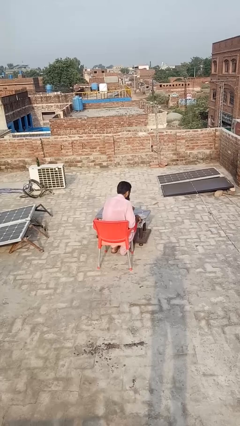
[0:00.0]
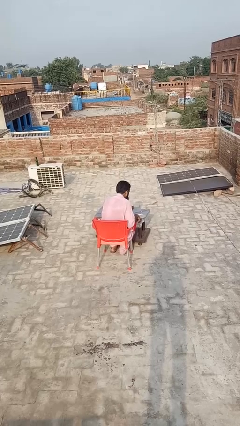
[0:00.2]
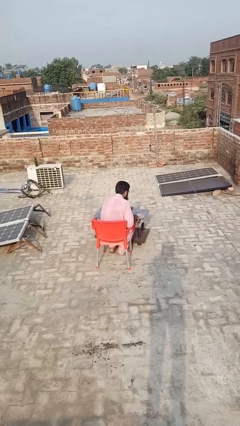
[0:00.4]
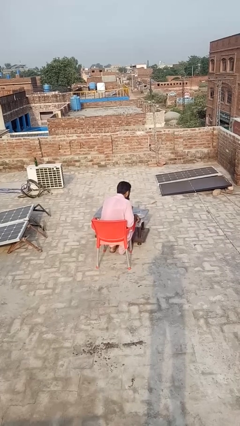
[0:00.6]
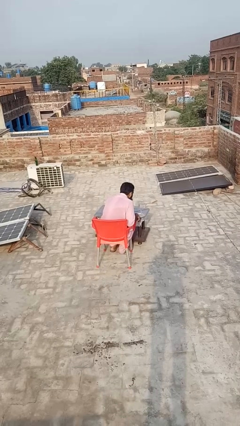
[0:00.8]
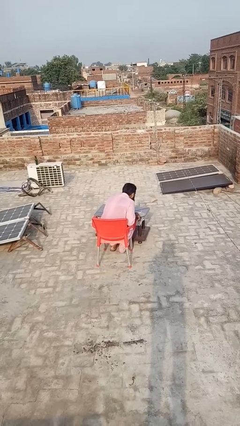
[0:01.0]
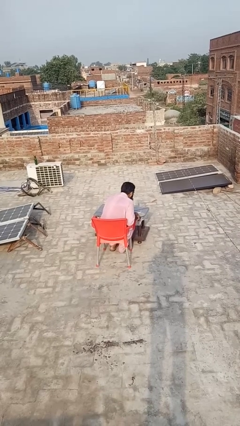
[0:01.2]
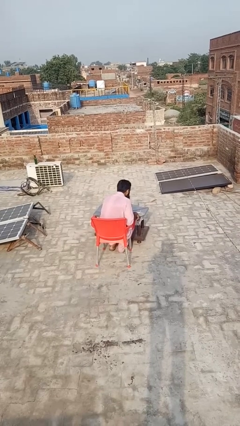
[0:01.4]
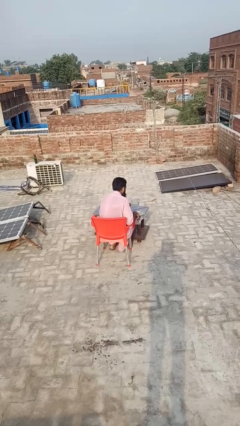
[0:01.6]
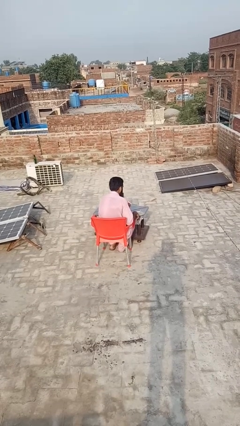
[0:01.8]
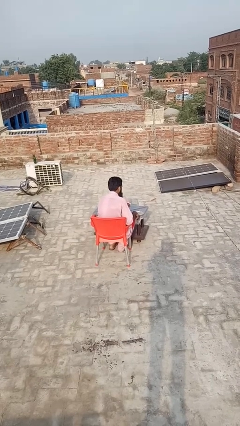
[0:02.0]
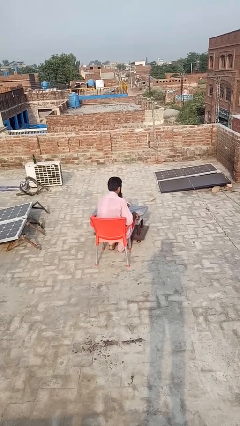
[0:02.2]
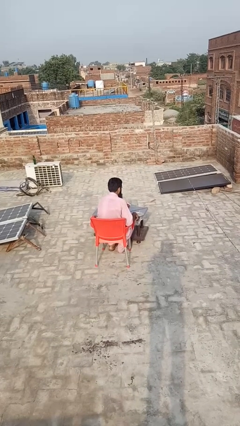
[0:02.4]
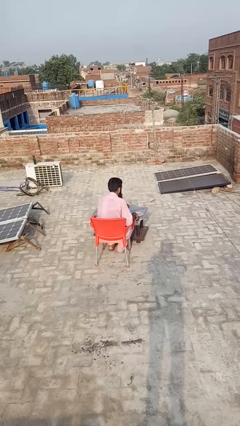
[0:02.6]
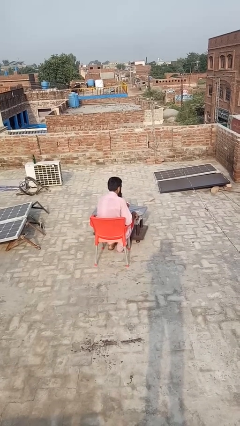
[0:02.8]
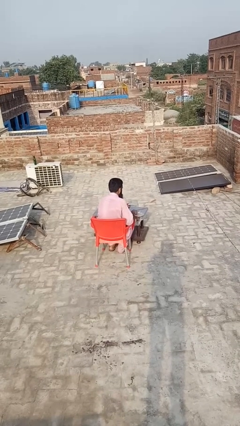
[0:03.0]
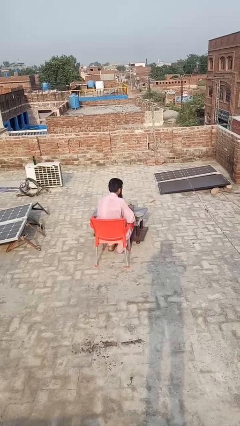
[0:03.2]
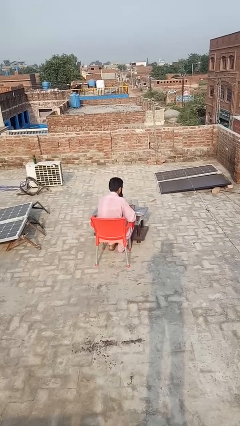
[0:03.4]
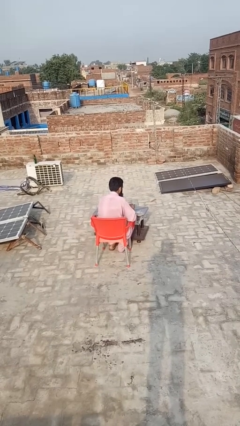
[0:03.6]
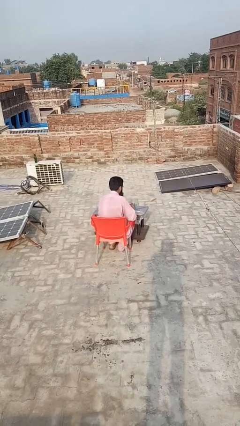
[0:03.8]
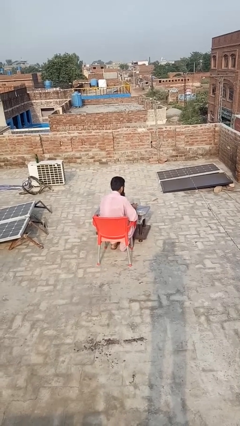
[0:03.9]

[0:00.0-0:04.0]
person extinguishes candle

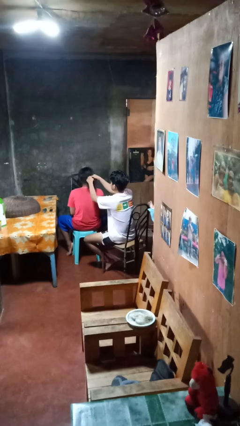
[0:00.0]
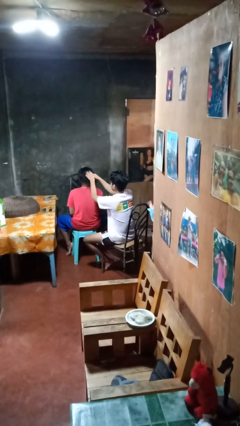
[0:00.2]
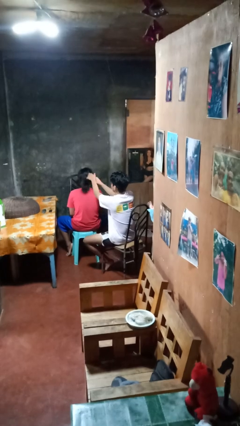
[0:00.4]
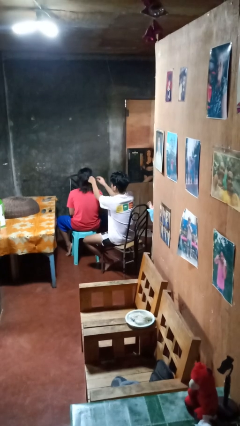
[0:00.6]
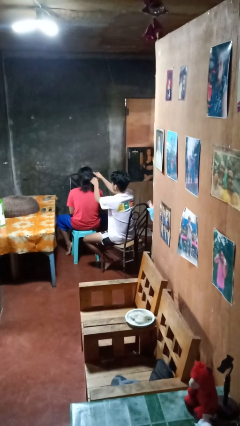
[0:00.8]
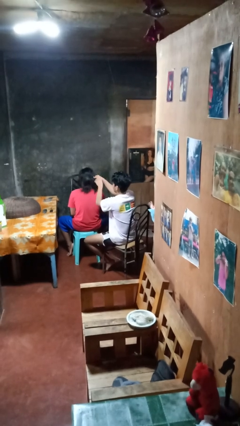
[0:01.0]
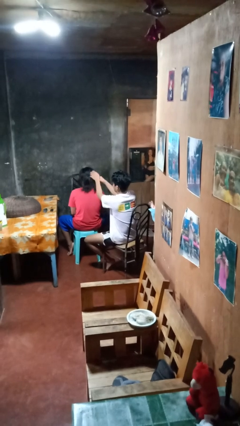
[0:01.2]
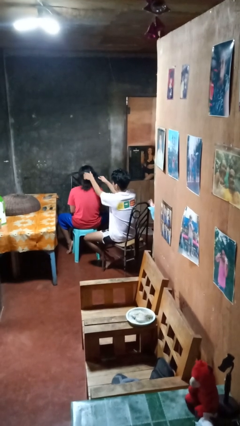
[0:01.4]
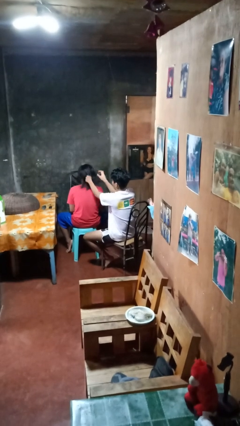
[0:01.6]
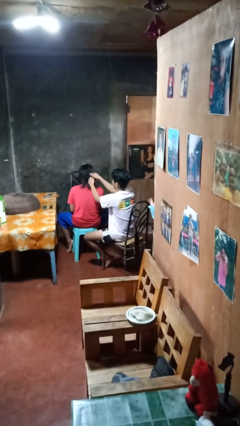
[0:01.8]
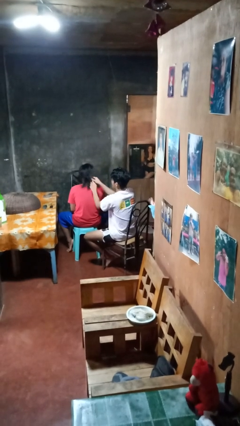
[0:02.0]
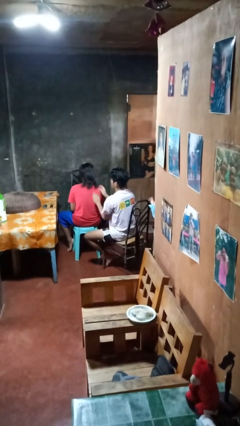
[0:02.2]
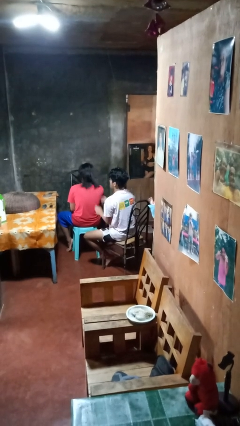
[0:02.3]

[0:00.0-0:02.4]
person braids hair of person

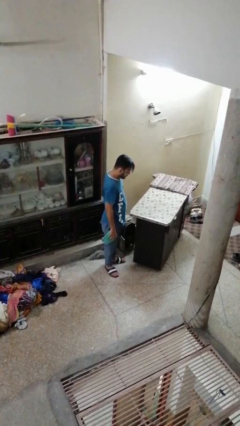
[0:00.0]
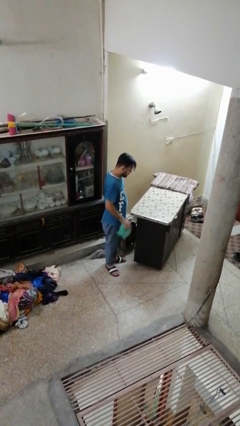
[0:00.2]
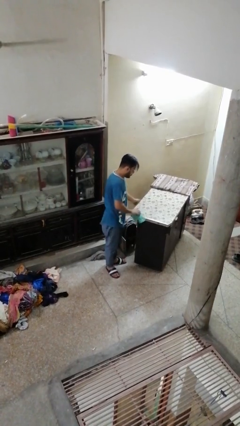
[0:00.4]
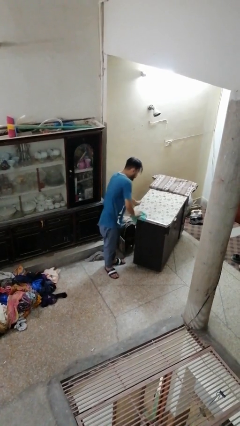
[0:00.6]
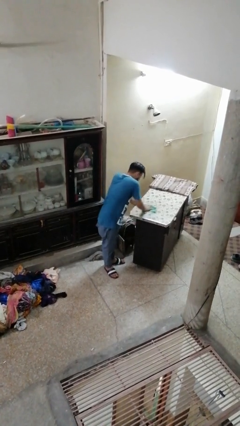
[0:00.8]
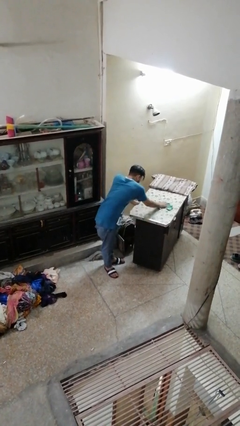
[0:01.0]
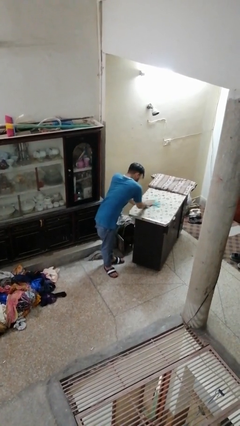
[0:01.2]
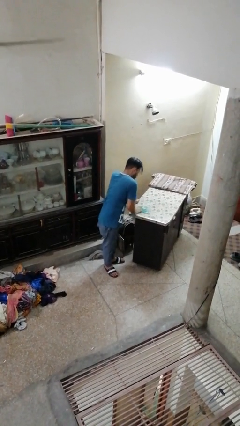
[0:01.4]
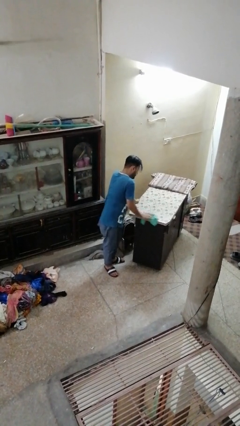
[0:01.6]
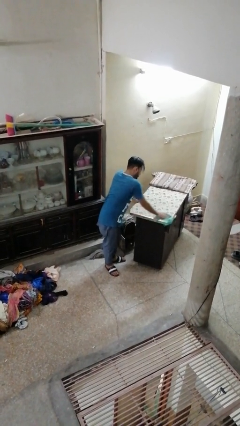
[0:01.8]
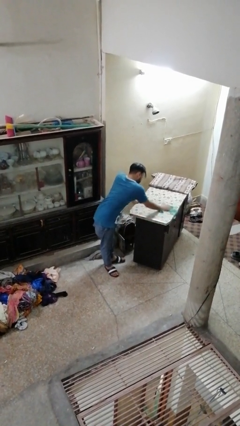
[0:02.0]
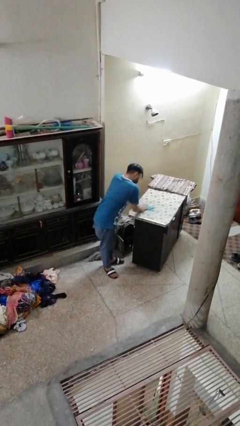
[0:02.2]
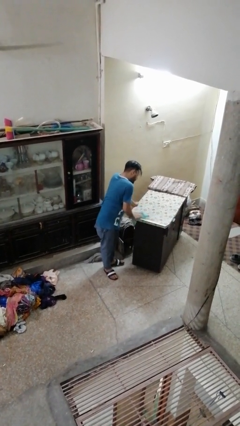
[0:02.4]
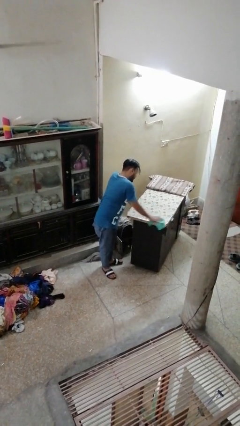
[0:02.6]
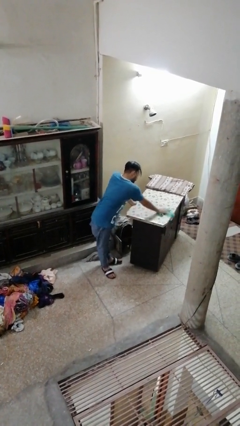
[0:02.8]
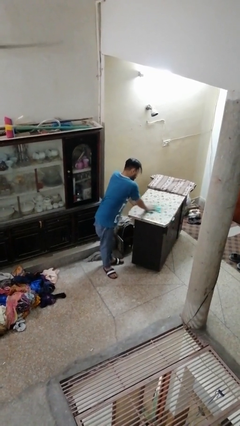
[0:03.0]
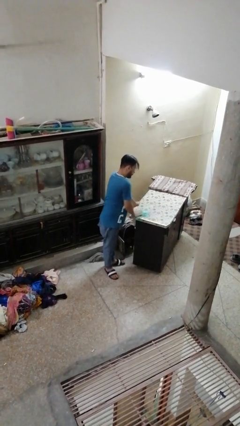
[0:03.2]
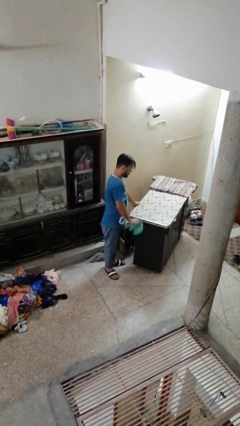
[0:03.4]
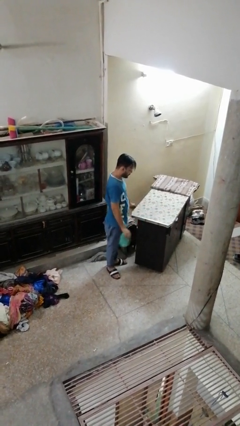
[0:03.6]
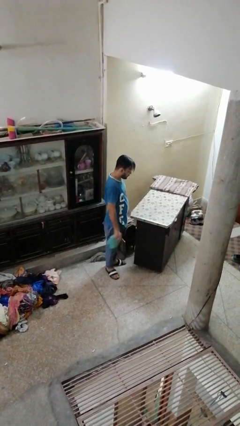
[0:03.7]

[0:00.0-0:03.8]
person cleans table with rag

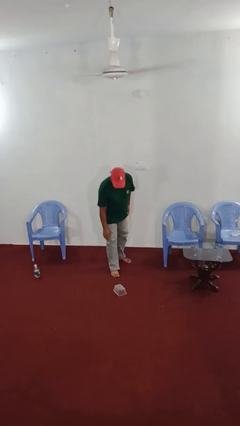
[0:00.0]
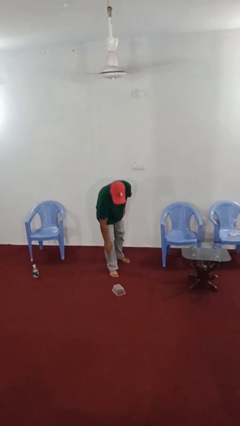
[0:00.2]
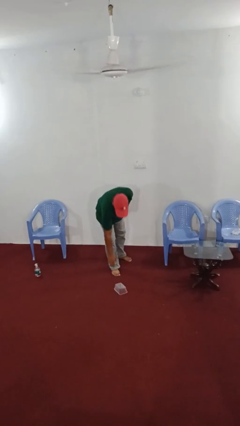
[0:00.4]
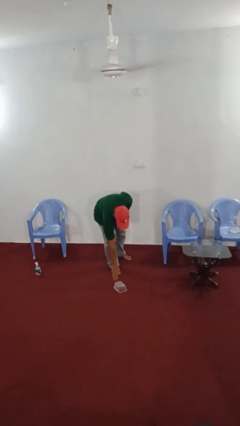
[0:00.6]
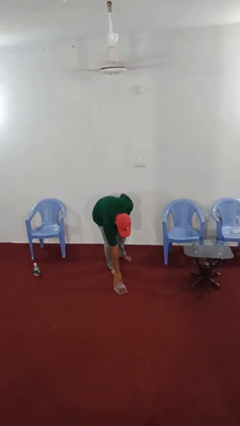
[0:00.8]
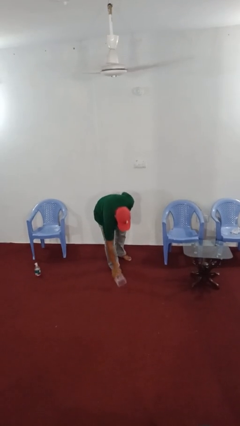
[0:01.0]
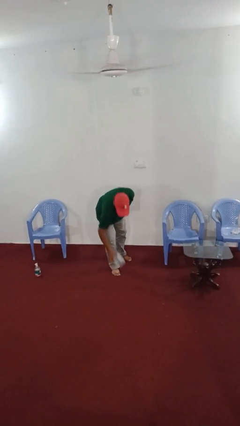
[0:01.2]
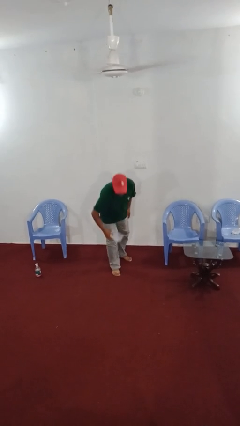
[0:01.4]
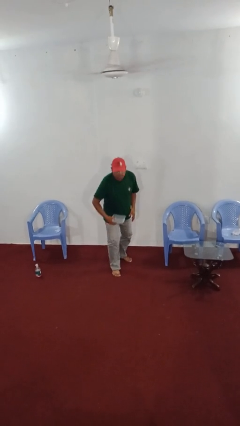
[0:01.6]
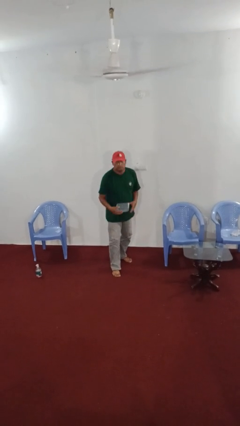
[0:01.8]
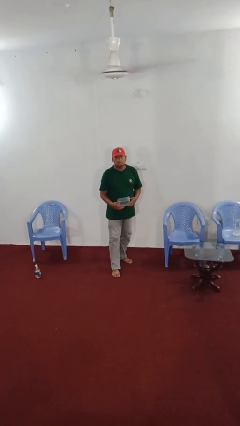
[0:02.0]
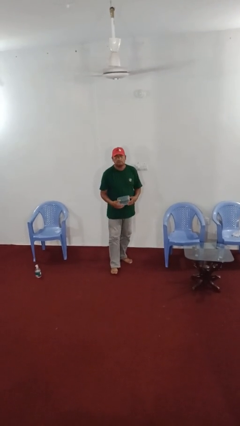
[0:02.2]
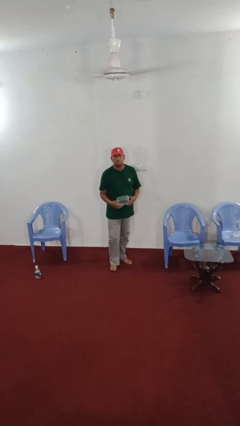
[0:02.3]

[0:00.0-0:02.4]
person picks up object from floor

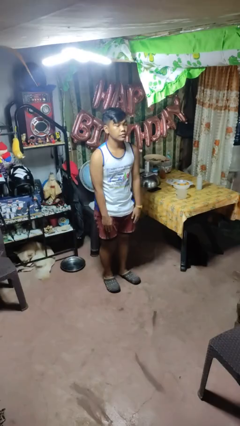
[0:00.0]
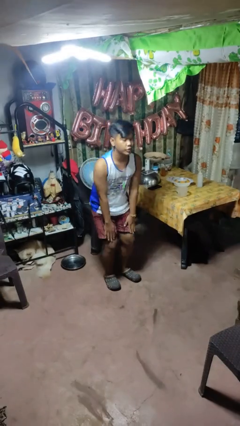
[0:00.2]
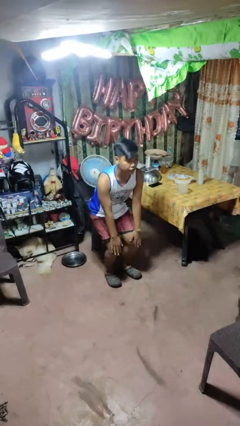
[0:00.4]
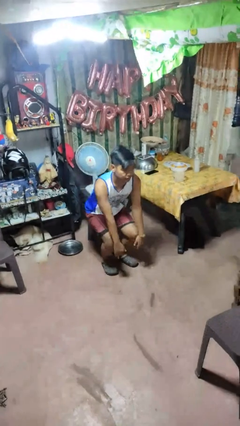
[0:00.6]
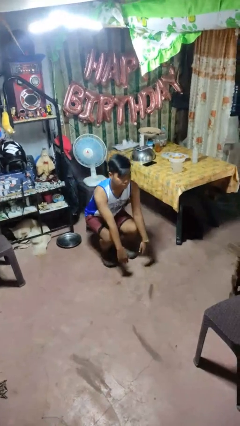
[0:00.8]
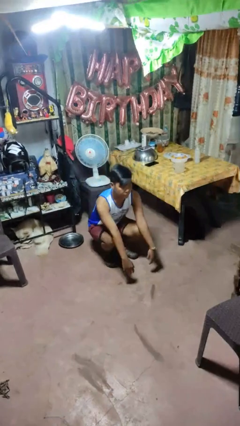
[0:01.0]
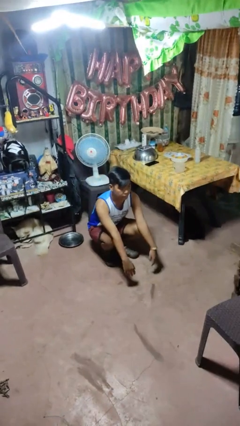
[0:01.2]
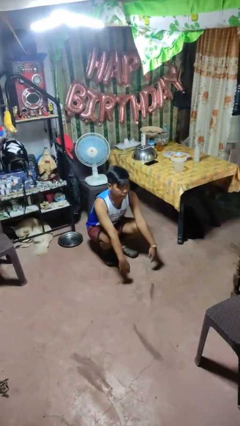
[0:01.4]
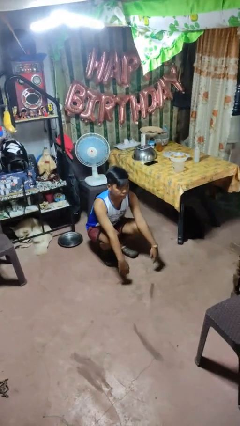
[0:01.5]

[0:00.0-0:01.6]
person squats

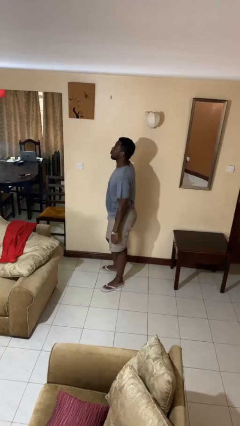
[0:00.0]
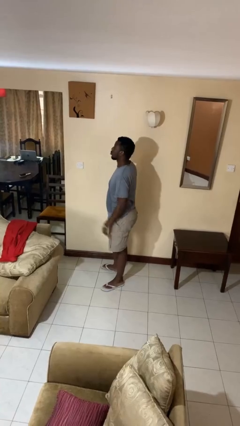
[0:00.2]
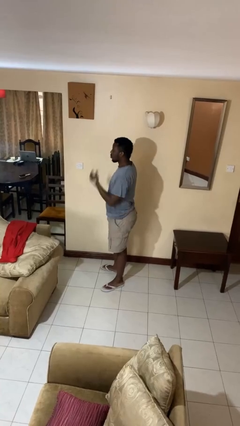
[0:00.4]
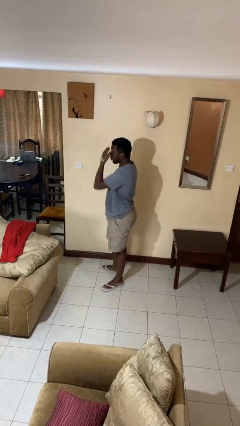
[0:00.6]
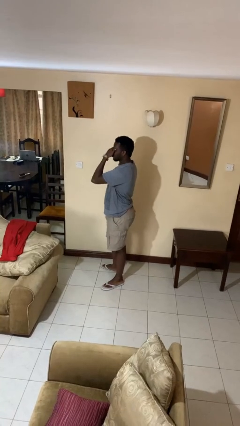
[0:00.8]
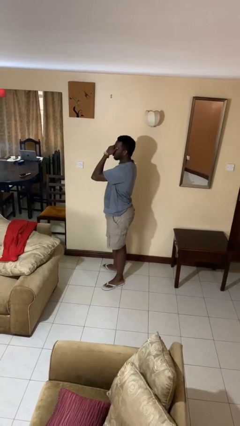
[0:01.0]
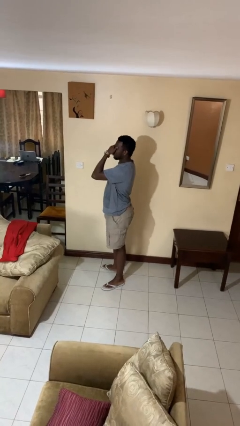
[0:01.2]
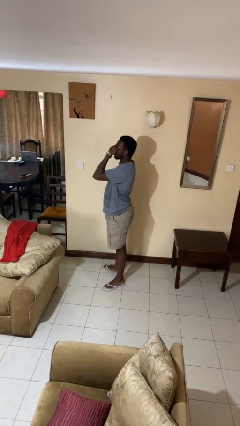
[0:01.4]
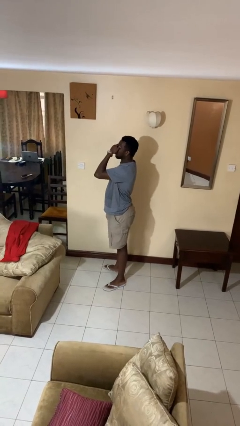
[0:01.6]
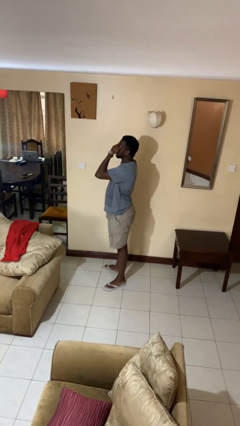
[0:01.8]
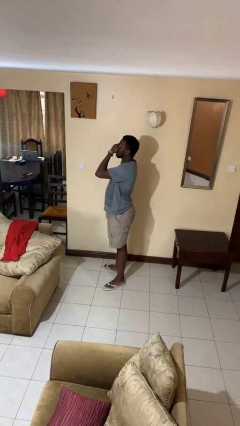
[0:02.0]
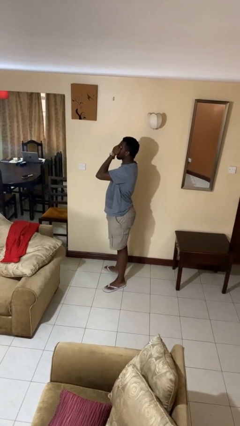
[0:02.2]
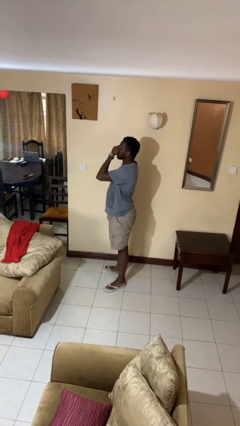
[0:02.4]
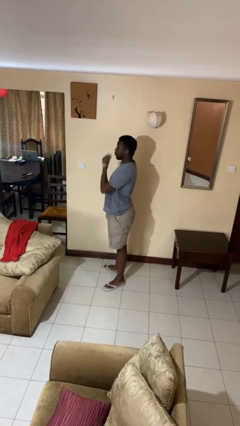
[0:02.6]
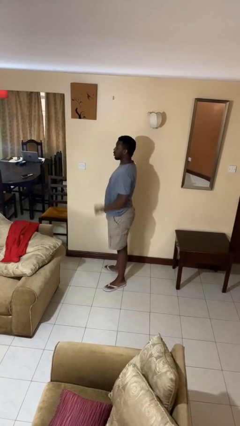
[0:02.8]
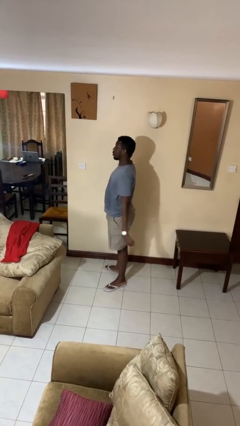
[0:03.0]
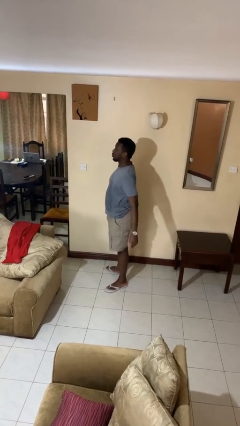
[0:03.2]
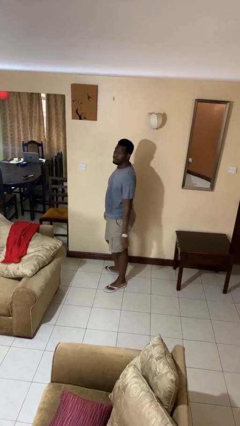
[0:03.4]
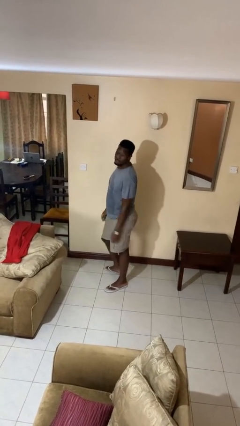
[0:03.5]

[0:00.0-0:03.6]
person rubs eyes
